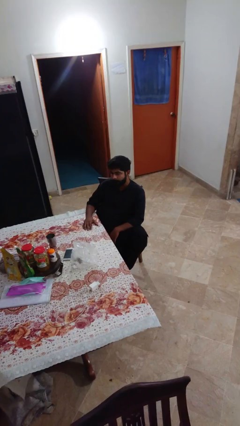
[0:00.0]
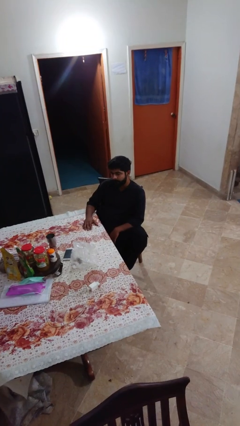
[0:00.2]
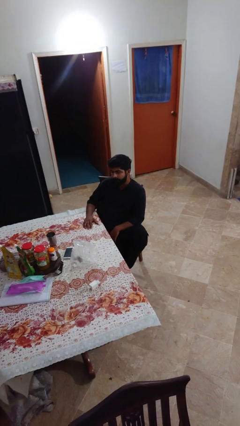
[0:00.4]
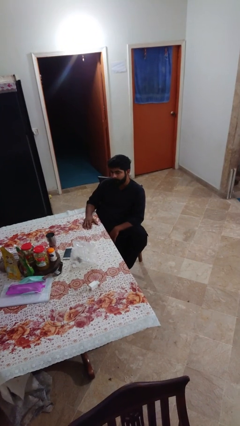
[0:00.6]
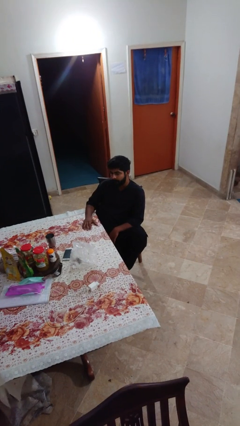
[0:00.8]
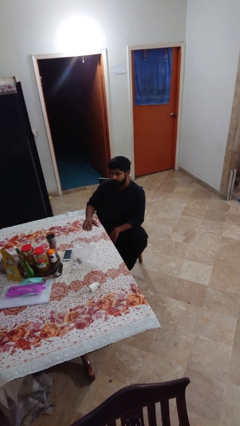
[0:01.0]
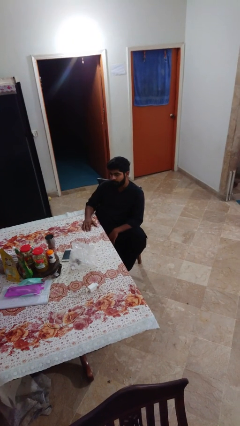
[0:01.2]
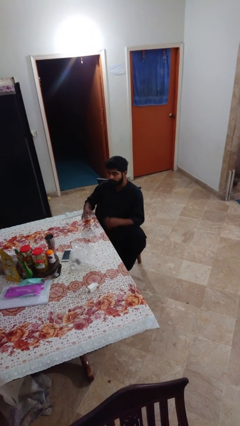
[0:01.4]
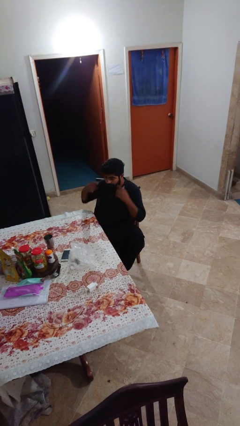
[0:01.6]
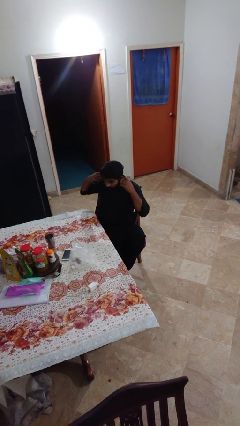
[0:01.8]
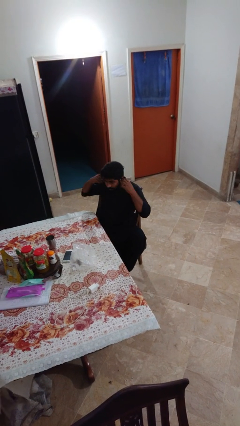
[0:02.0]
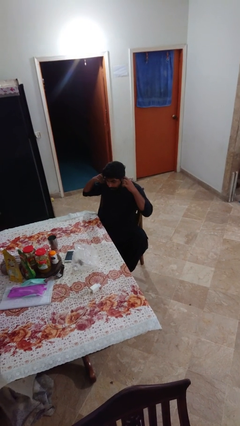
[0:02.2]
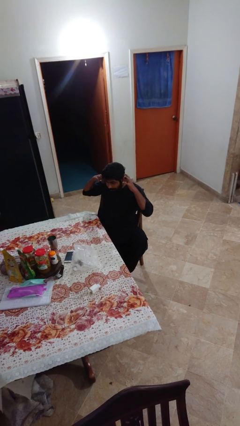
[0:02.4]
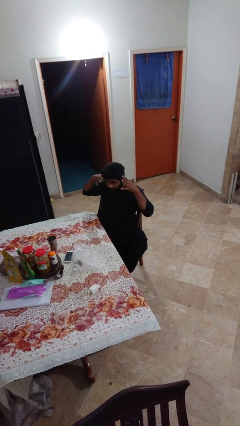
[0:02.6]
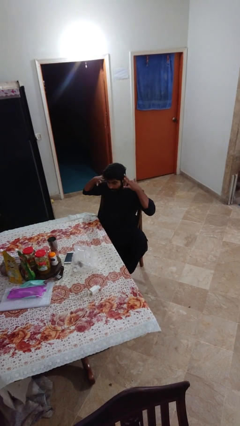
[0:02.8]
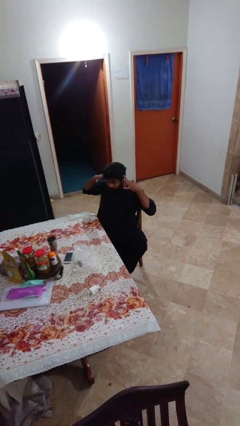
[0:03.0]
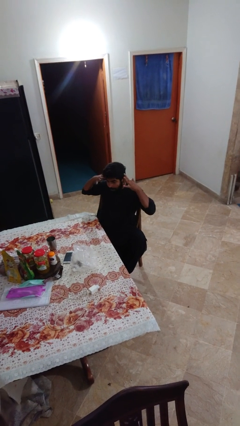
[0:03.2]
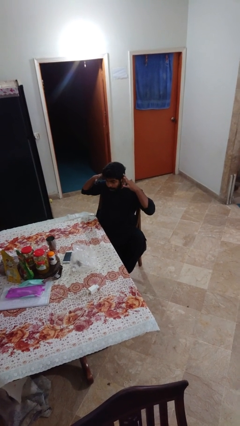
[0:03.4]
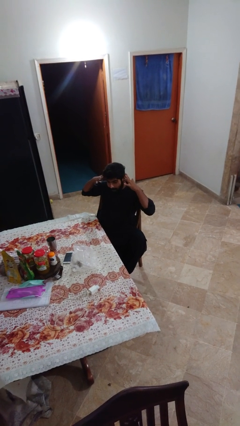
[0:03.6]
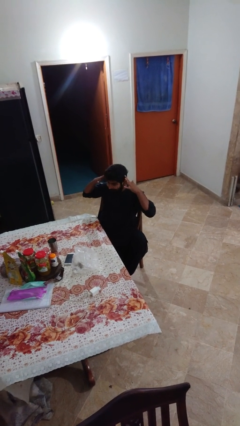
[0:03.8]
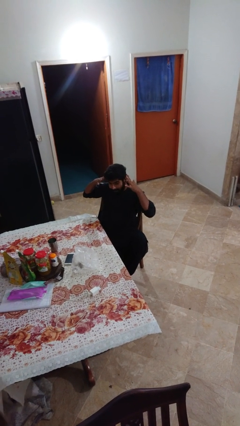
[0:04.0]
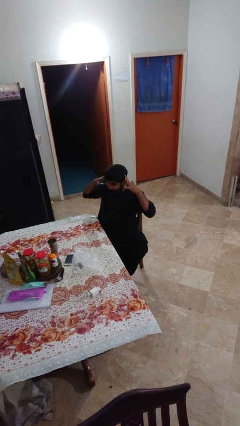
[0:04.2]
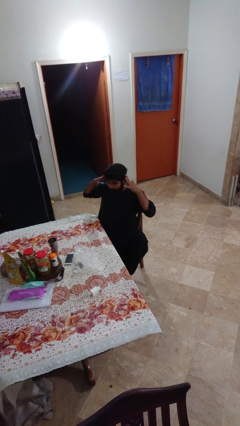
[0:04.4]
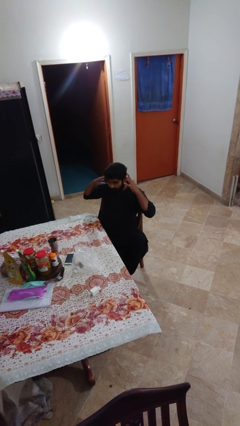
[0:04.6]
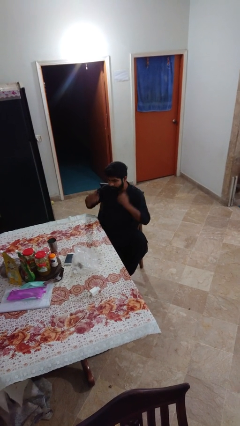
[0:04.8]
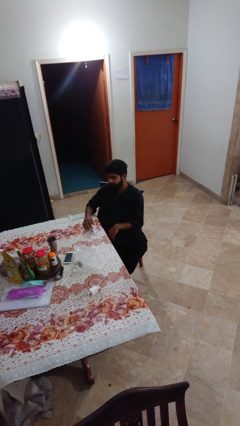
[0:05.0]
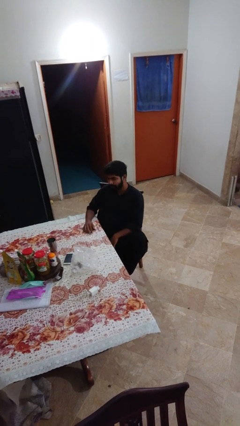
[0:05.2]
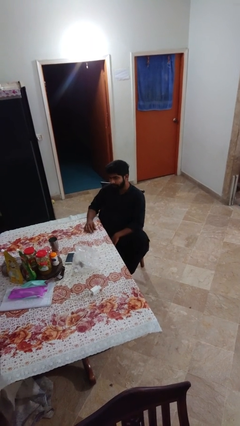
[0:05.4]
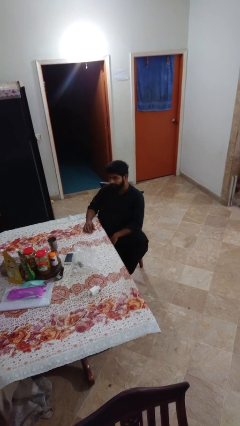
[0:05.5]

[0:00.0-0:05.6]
person puts fingers in ear

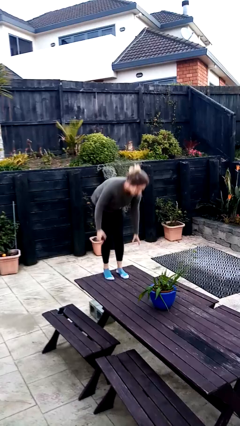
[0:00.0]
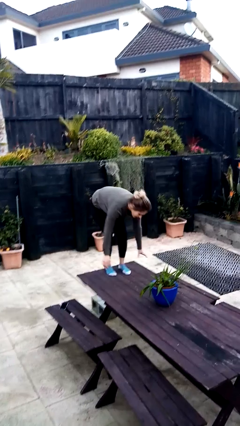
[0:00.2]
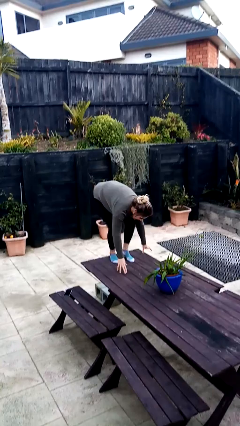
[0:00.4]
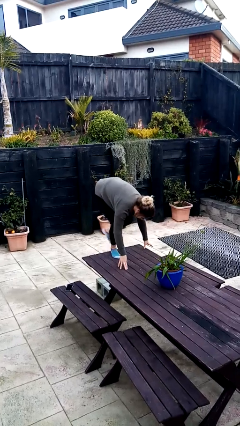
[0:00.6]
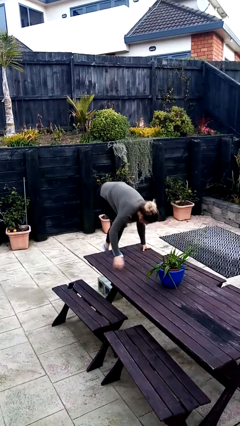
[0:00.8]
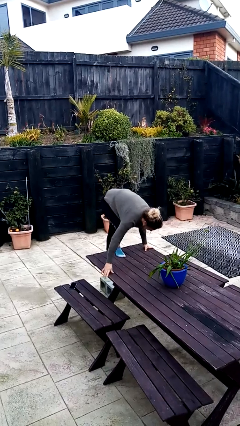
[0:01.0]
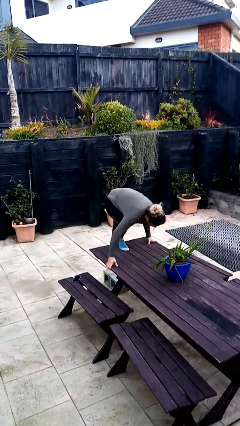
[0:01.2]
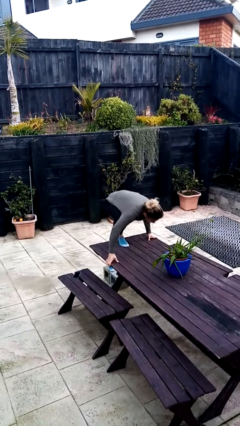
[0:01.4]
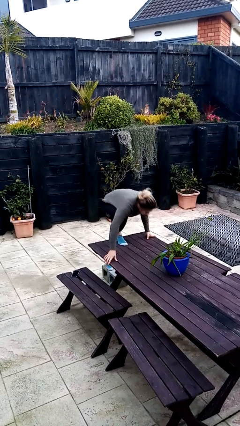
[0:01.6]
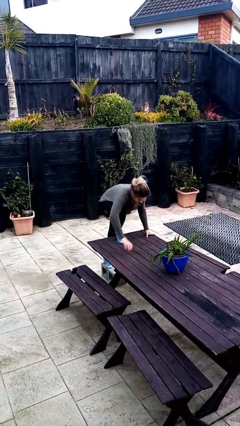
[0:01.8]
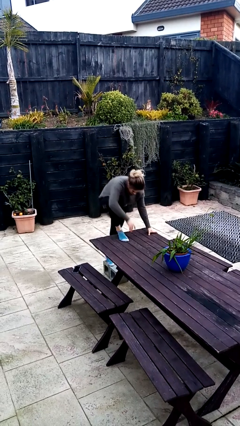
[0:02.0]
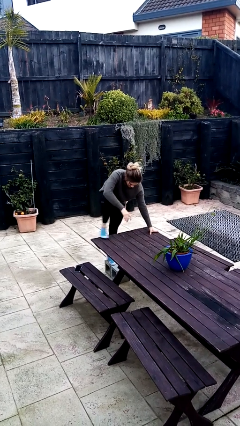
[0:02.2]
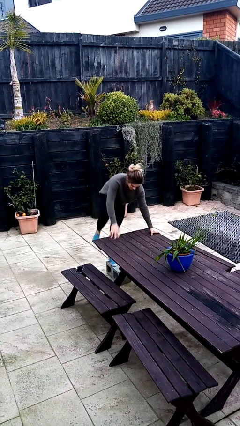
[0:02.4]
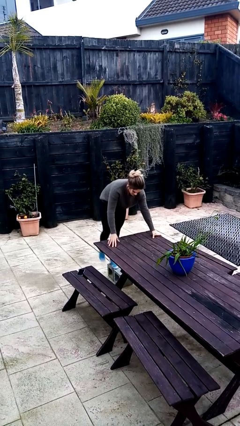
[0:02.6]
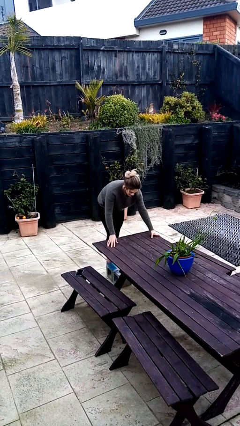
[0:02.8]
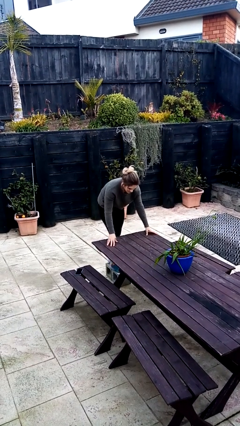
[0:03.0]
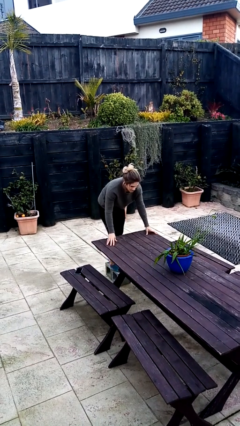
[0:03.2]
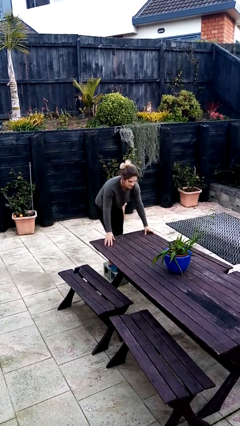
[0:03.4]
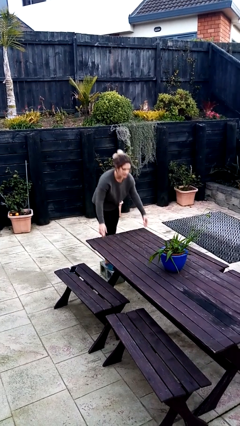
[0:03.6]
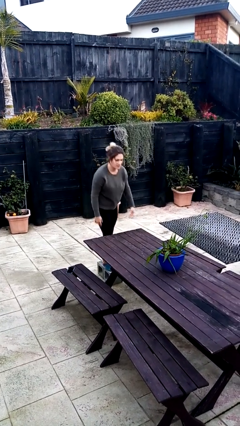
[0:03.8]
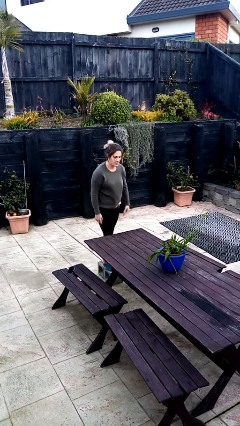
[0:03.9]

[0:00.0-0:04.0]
person climbs off table

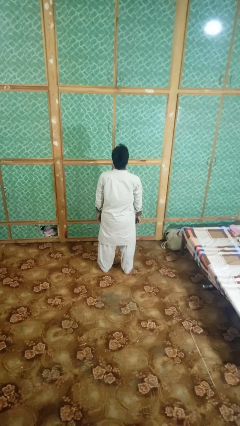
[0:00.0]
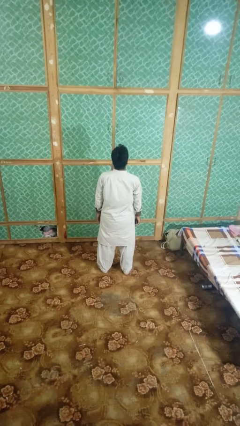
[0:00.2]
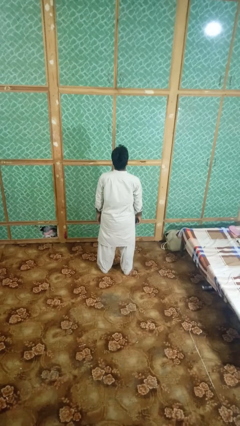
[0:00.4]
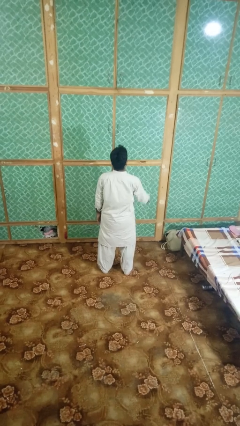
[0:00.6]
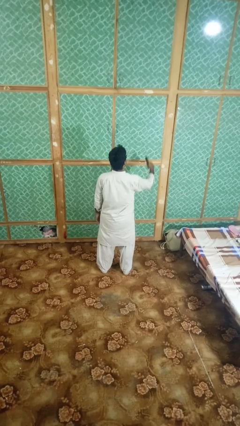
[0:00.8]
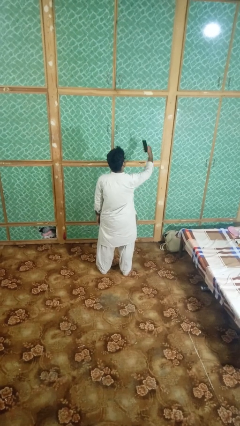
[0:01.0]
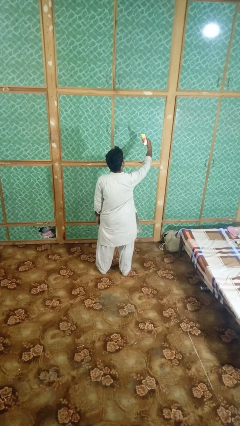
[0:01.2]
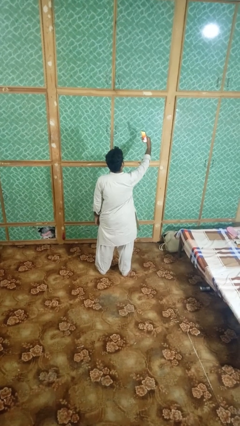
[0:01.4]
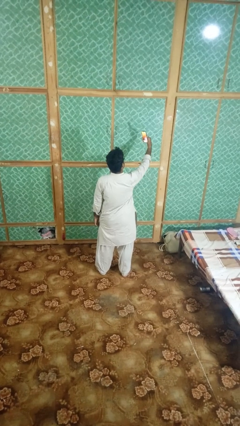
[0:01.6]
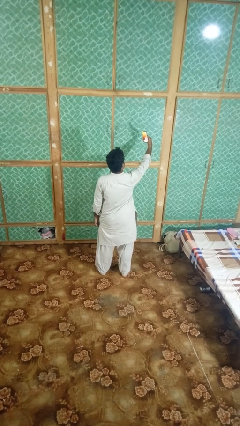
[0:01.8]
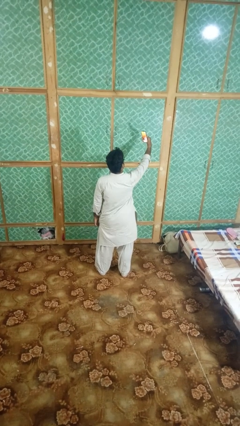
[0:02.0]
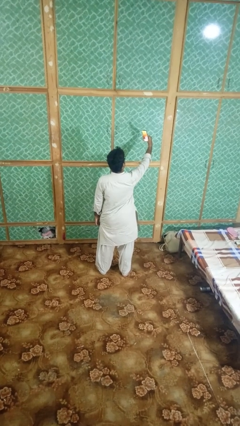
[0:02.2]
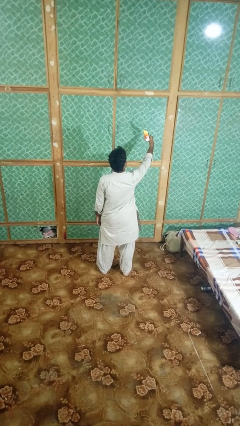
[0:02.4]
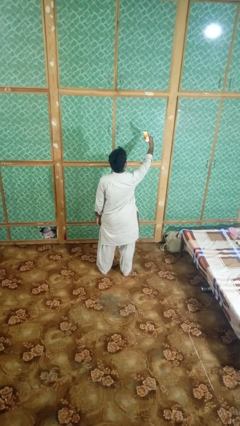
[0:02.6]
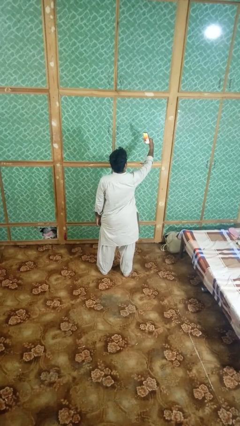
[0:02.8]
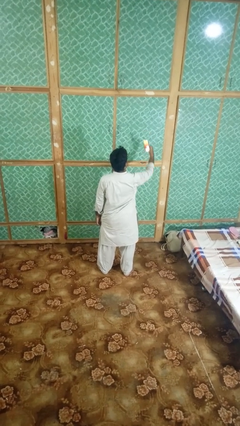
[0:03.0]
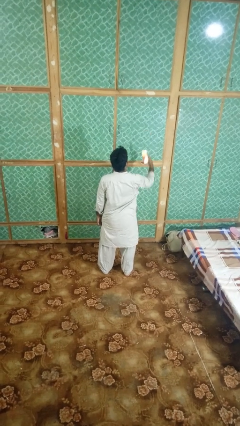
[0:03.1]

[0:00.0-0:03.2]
person takes selfie

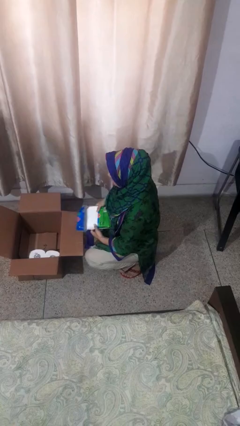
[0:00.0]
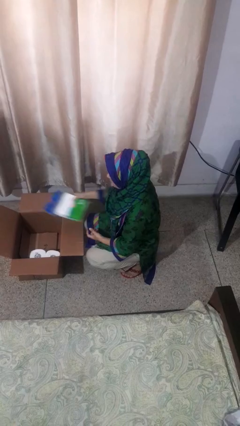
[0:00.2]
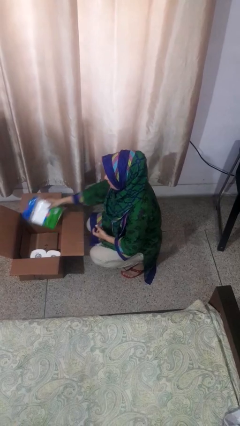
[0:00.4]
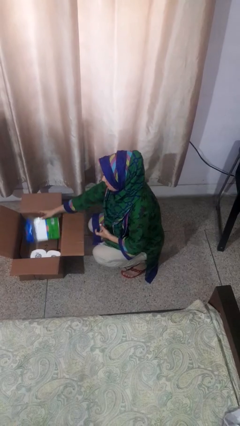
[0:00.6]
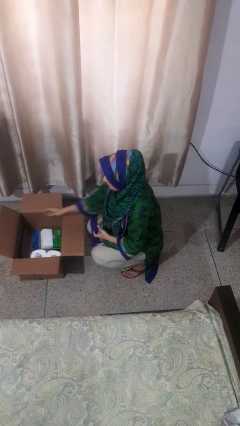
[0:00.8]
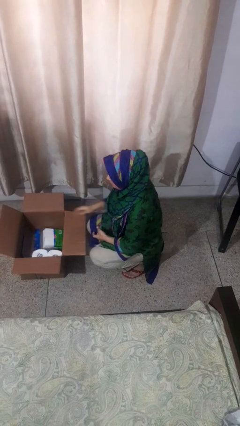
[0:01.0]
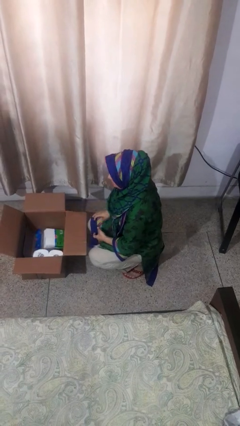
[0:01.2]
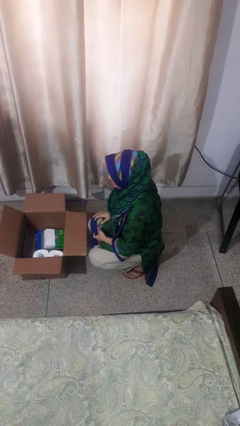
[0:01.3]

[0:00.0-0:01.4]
person puts object into box

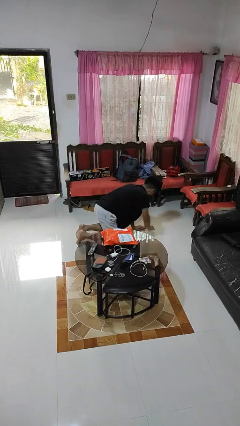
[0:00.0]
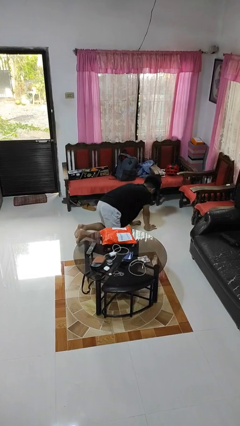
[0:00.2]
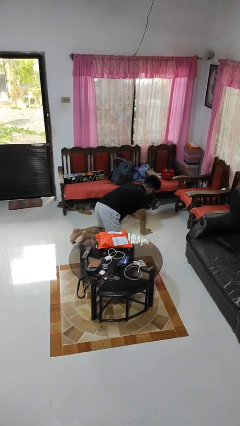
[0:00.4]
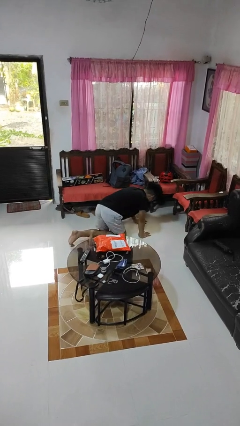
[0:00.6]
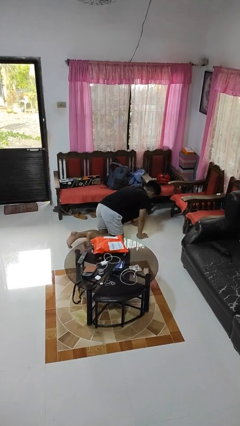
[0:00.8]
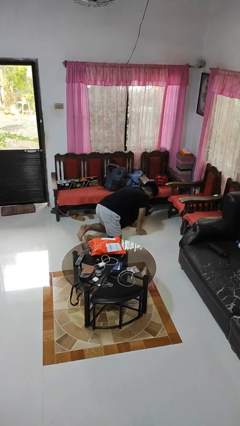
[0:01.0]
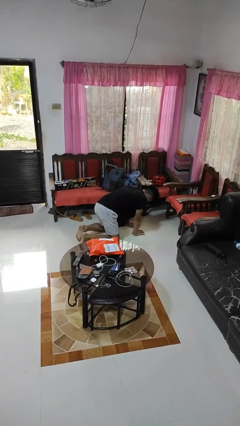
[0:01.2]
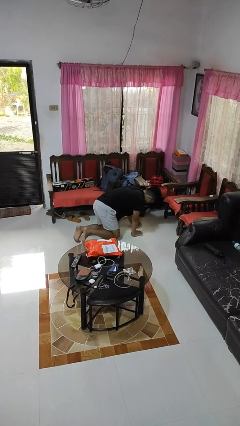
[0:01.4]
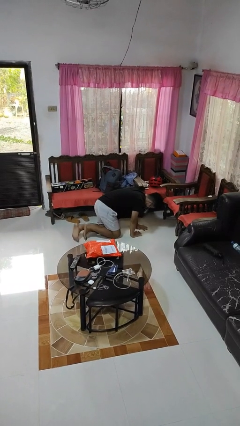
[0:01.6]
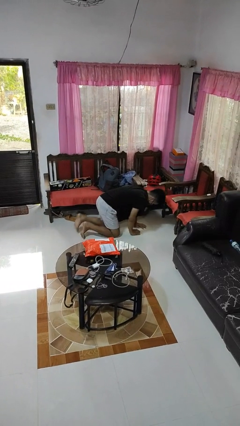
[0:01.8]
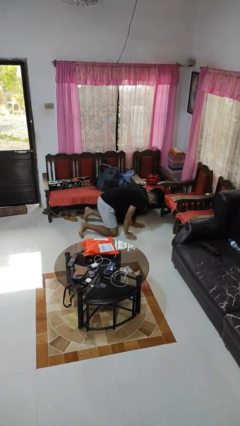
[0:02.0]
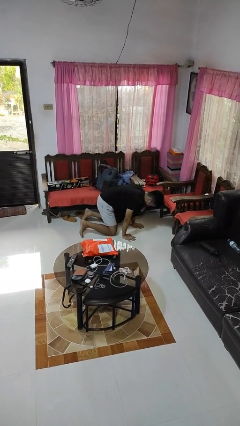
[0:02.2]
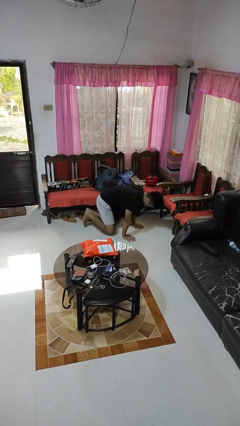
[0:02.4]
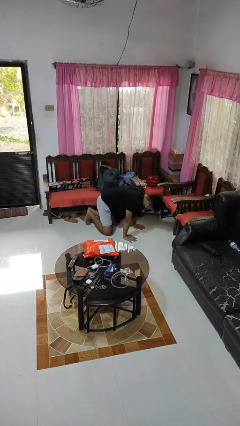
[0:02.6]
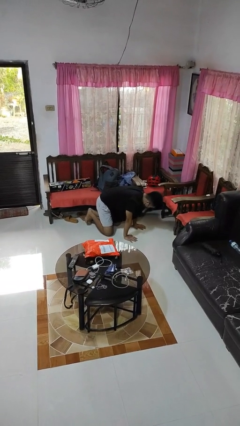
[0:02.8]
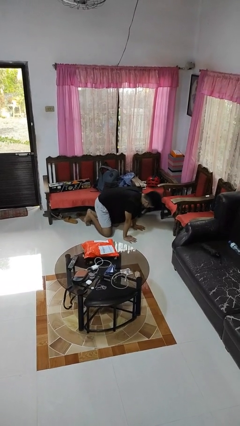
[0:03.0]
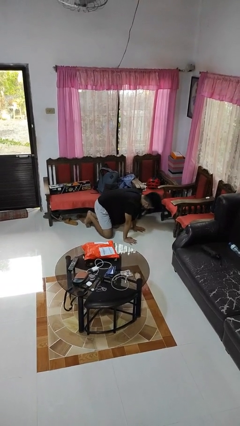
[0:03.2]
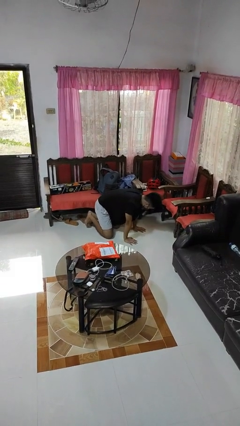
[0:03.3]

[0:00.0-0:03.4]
person crawls
